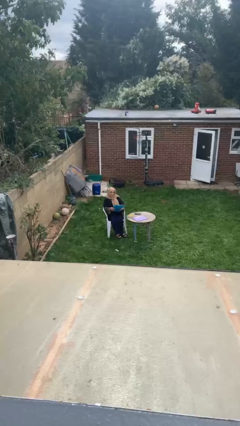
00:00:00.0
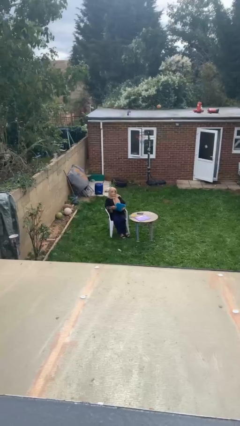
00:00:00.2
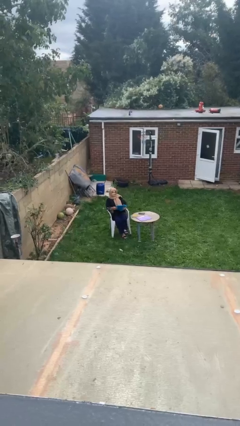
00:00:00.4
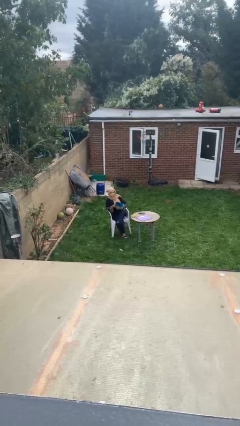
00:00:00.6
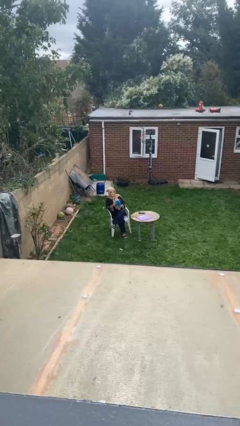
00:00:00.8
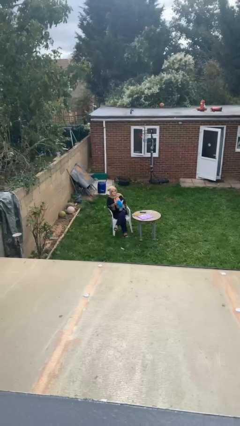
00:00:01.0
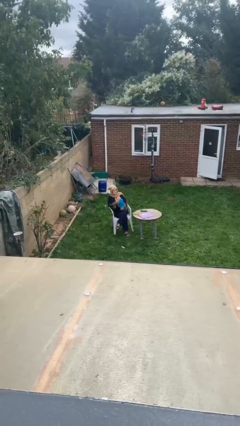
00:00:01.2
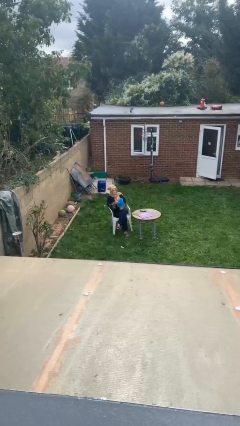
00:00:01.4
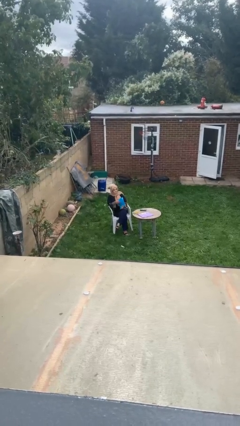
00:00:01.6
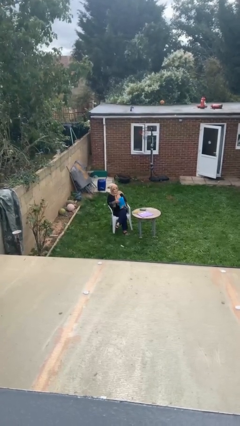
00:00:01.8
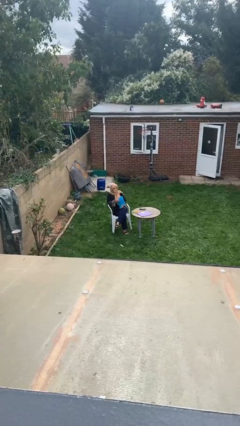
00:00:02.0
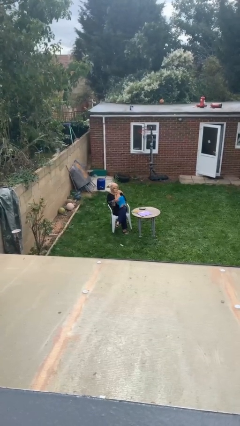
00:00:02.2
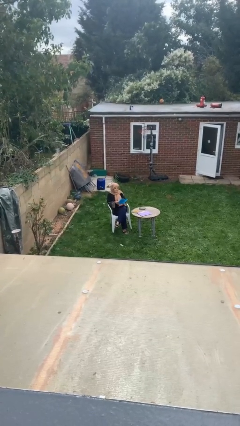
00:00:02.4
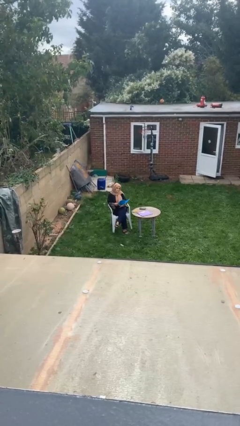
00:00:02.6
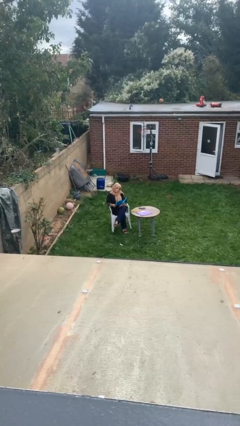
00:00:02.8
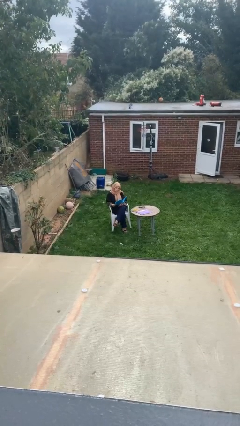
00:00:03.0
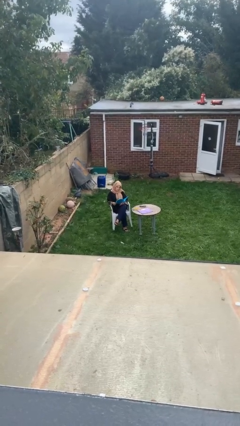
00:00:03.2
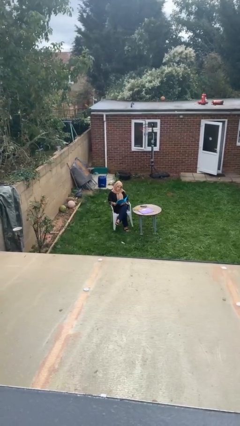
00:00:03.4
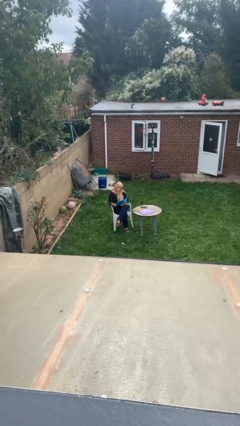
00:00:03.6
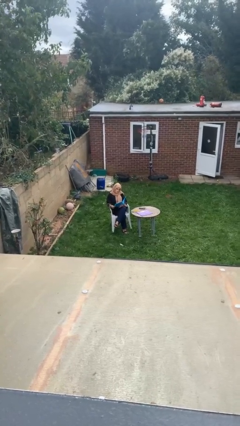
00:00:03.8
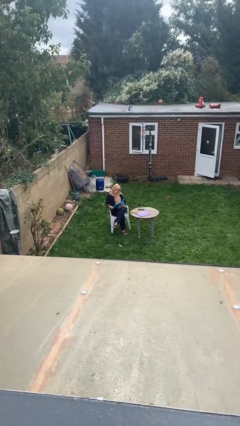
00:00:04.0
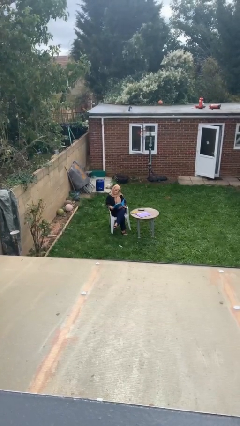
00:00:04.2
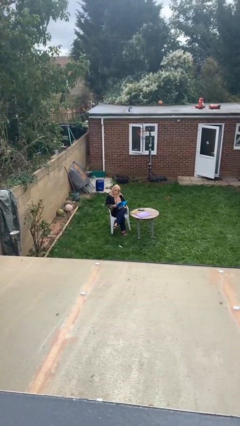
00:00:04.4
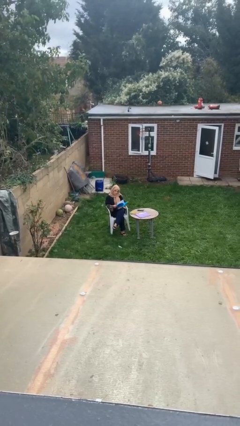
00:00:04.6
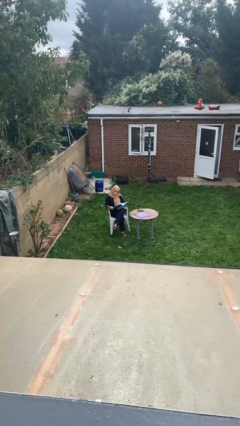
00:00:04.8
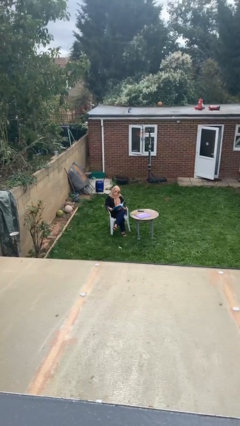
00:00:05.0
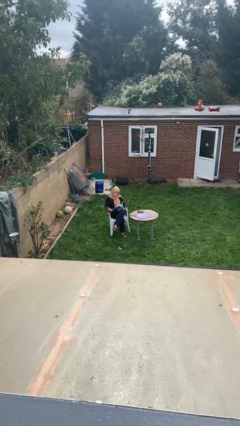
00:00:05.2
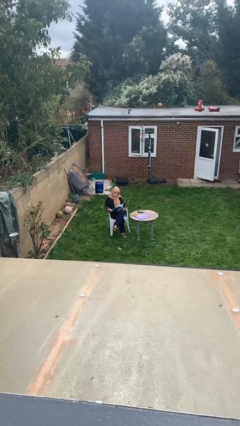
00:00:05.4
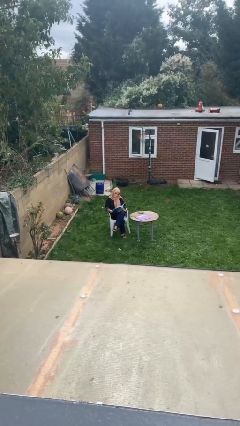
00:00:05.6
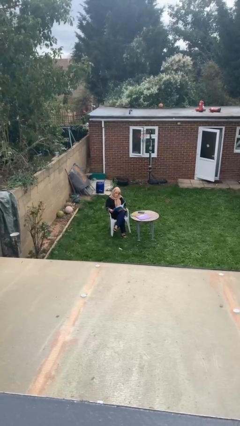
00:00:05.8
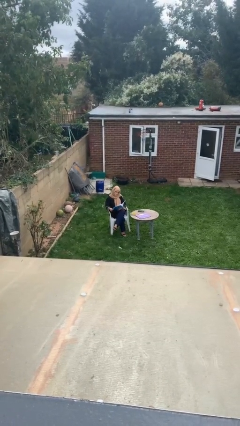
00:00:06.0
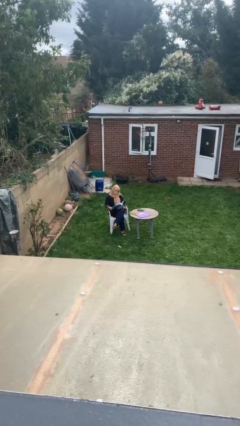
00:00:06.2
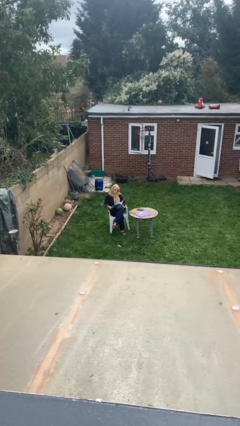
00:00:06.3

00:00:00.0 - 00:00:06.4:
person reads document

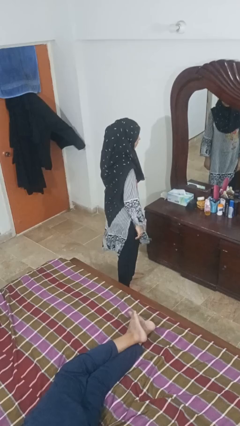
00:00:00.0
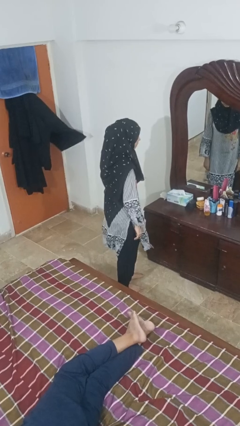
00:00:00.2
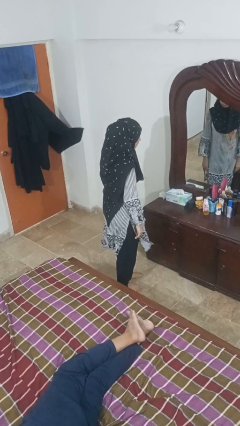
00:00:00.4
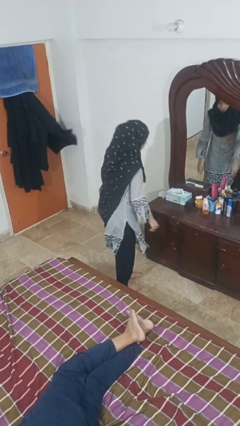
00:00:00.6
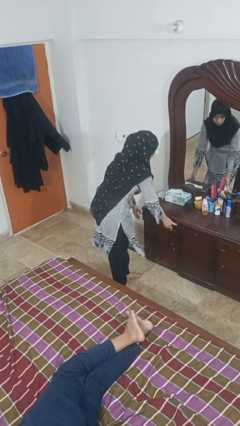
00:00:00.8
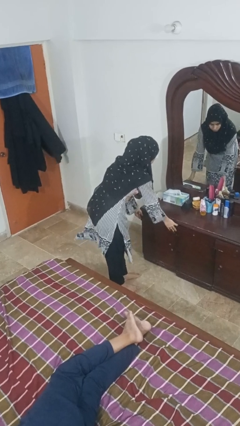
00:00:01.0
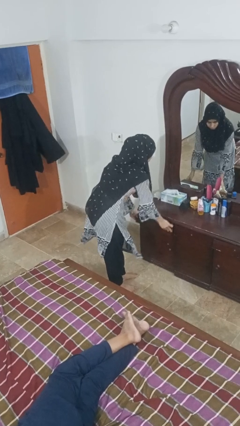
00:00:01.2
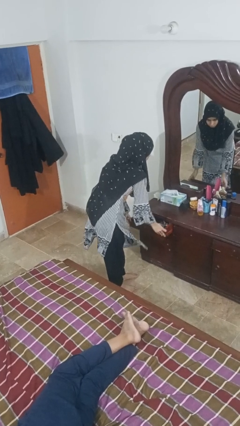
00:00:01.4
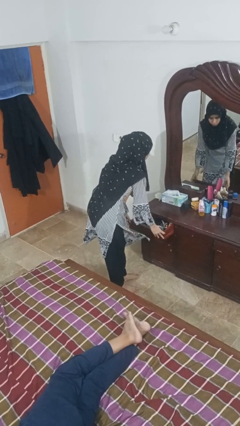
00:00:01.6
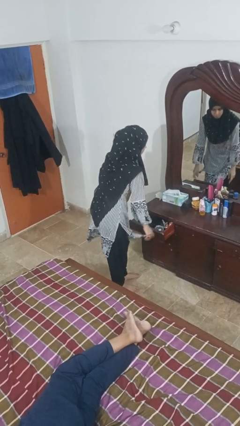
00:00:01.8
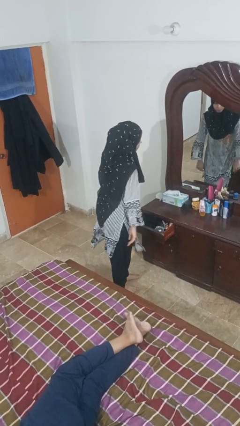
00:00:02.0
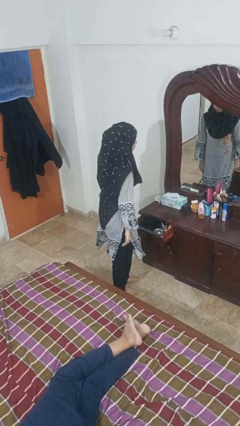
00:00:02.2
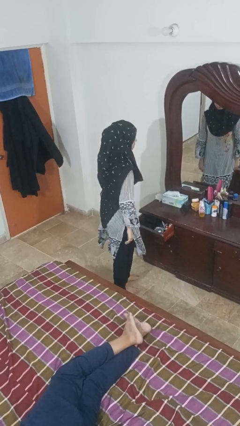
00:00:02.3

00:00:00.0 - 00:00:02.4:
person opens dresser drawer

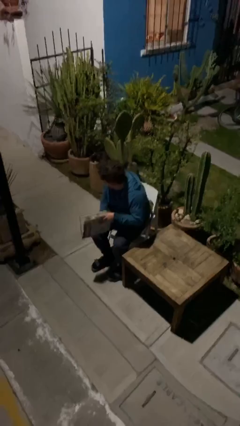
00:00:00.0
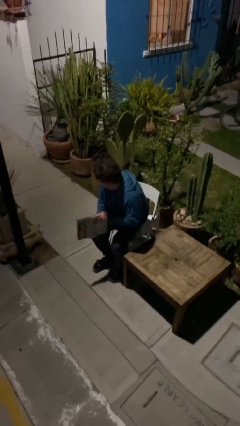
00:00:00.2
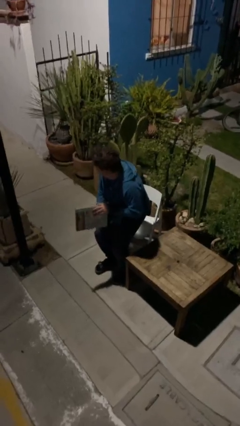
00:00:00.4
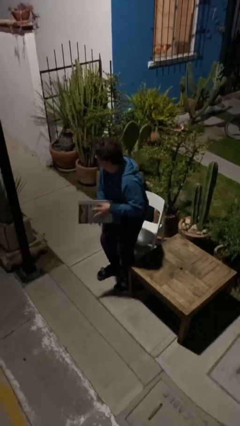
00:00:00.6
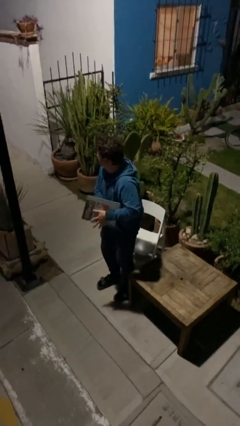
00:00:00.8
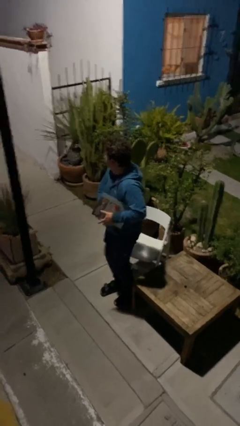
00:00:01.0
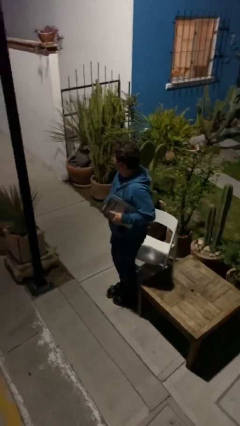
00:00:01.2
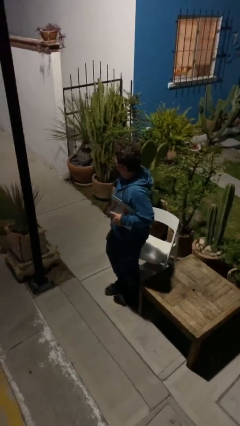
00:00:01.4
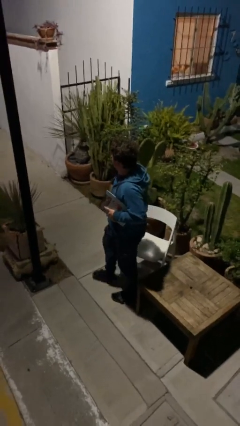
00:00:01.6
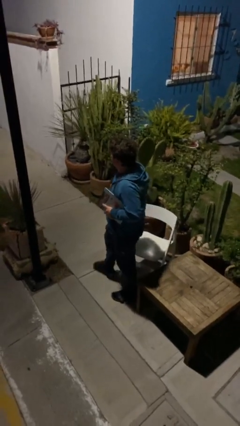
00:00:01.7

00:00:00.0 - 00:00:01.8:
person stands up

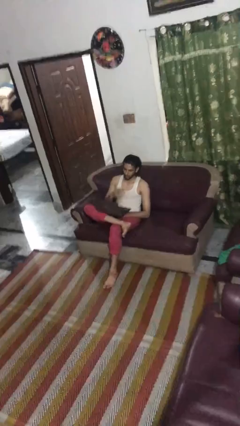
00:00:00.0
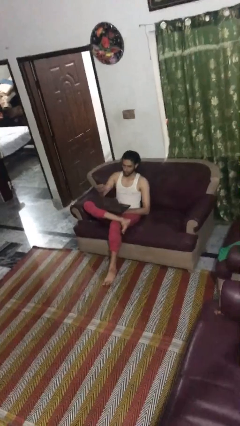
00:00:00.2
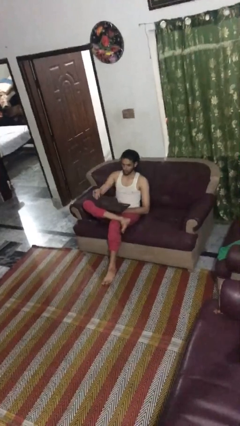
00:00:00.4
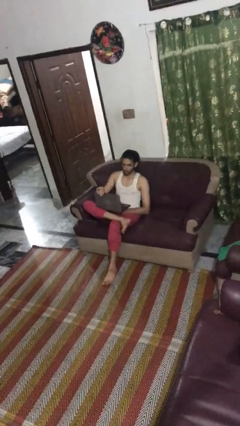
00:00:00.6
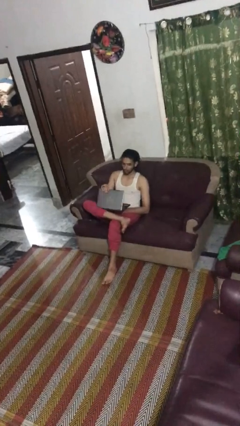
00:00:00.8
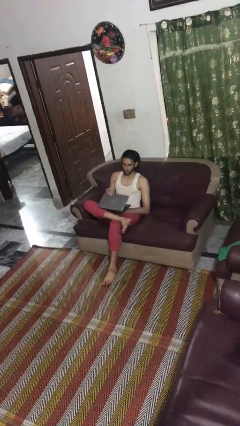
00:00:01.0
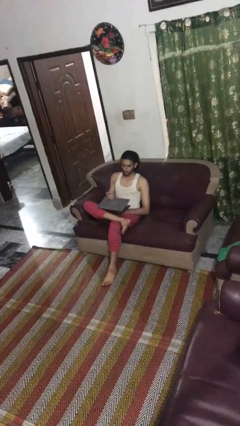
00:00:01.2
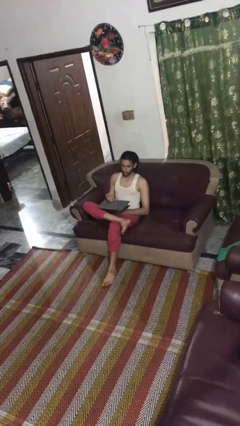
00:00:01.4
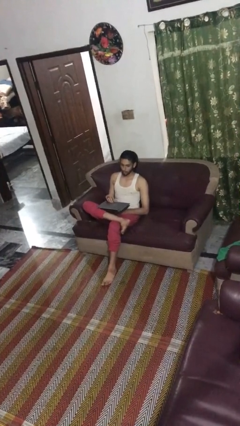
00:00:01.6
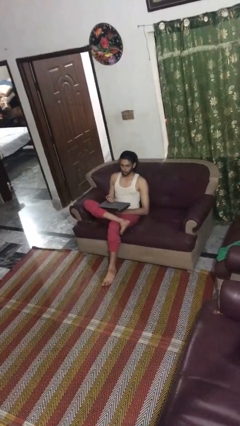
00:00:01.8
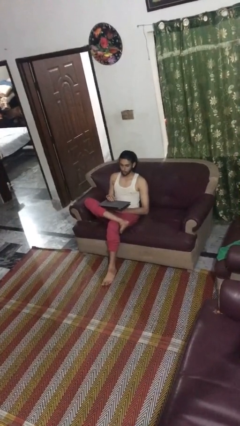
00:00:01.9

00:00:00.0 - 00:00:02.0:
person closes laptop

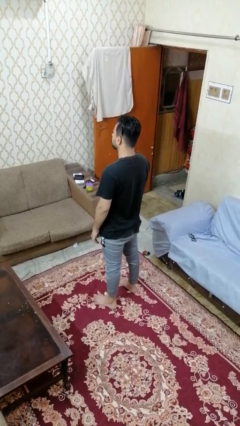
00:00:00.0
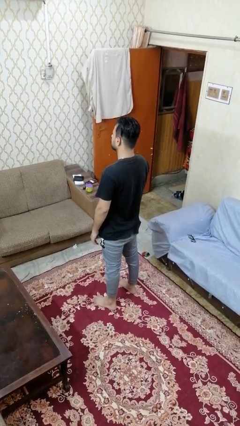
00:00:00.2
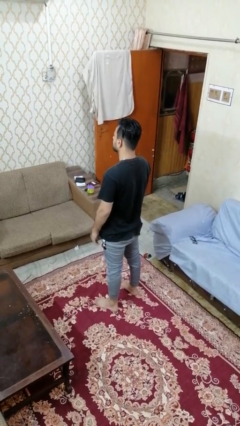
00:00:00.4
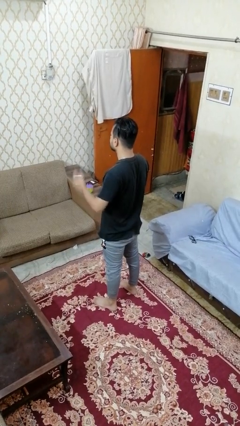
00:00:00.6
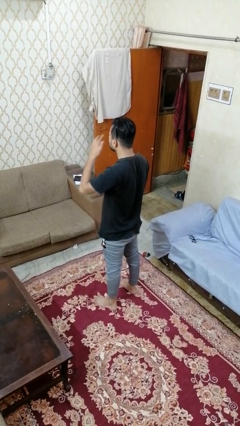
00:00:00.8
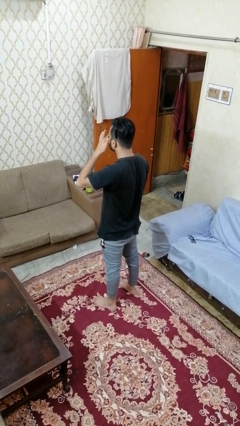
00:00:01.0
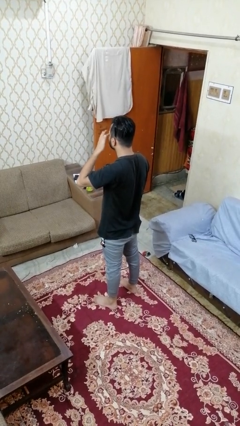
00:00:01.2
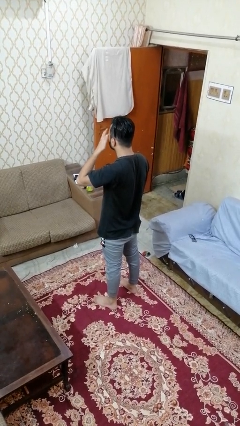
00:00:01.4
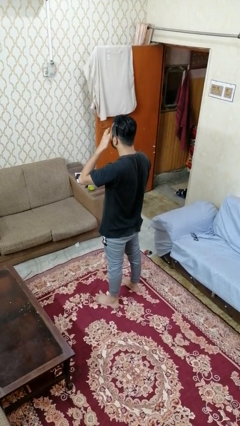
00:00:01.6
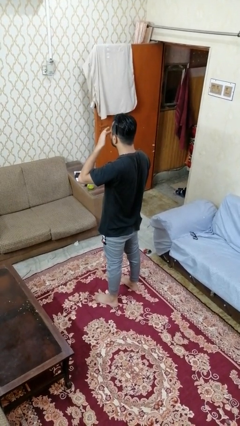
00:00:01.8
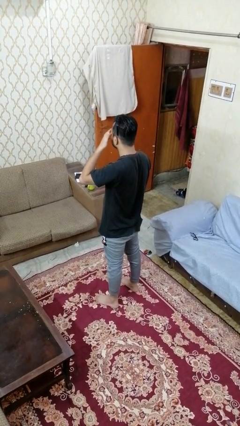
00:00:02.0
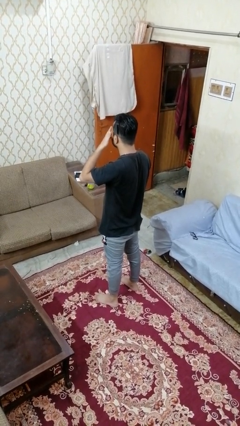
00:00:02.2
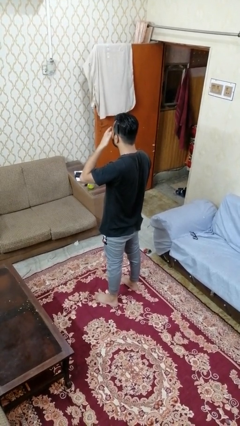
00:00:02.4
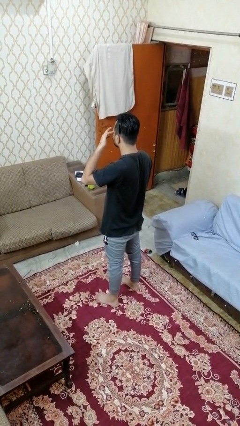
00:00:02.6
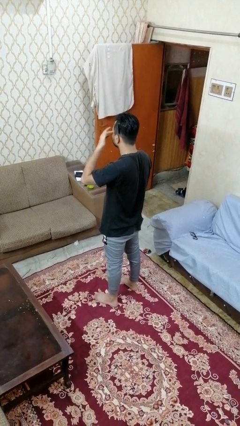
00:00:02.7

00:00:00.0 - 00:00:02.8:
person rubs eyes

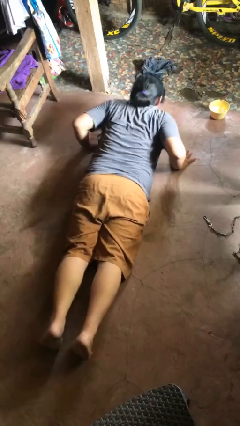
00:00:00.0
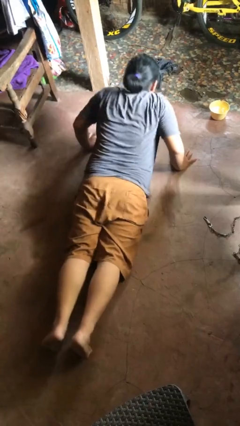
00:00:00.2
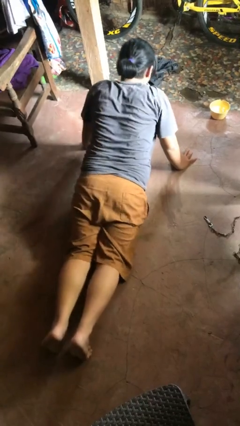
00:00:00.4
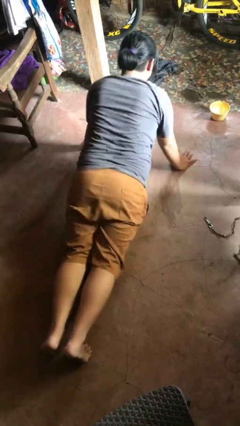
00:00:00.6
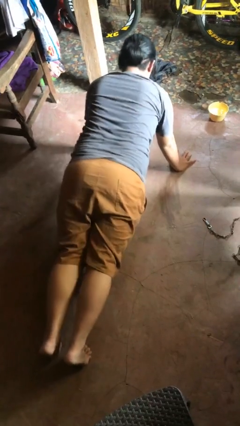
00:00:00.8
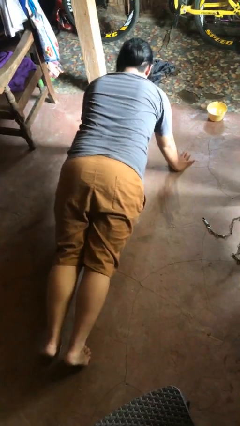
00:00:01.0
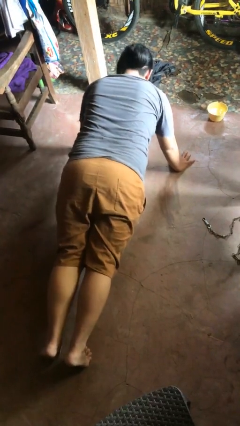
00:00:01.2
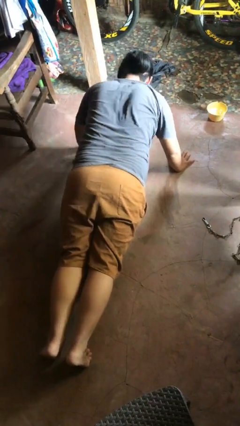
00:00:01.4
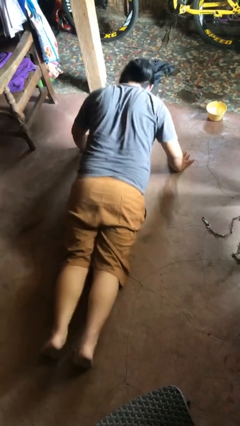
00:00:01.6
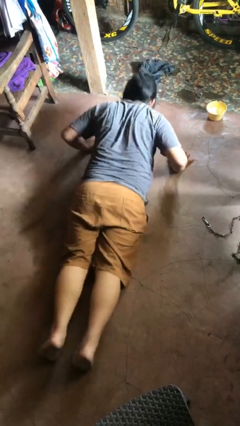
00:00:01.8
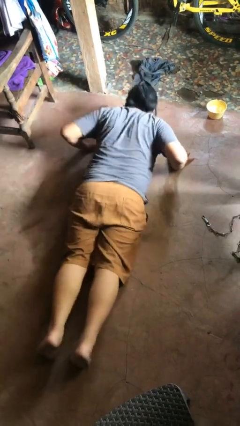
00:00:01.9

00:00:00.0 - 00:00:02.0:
person exercises with pushup
